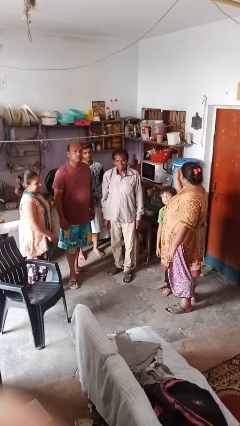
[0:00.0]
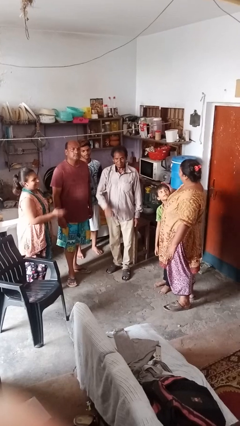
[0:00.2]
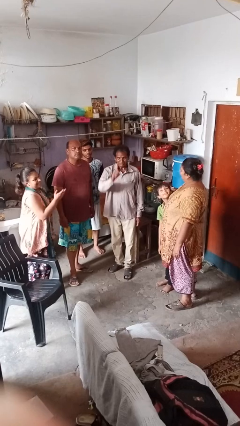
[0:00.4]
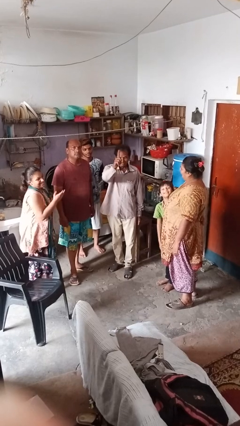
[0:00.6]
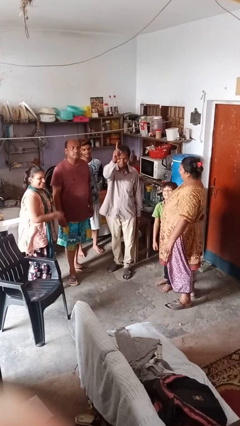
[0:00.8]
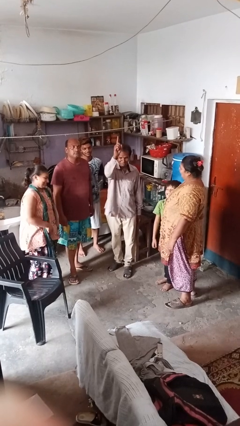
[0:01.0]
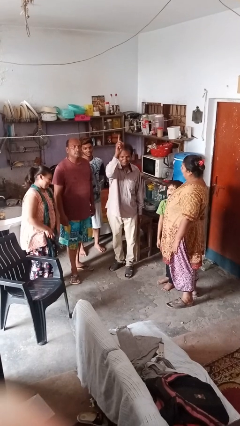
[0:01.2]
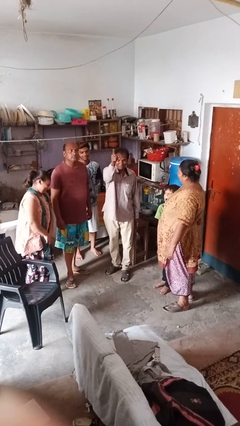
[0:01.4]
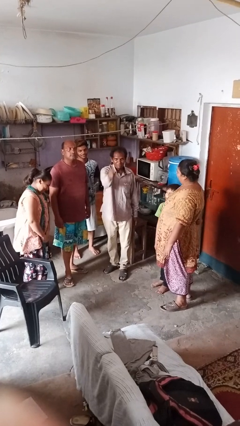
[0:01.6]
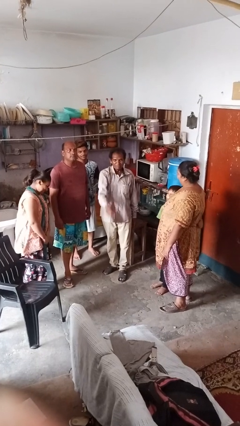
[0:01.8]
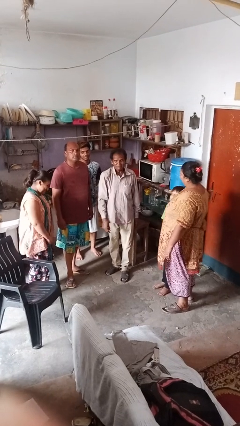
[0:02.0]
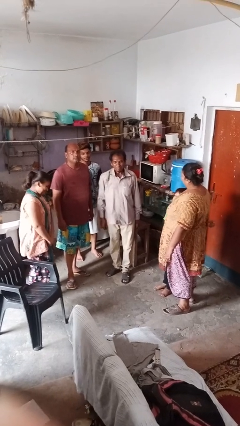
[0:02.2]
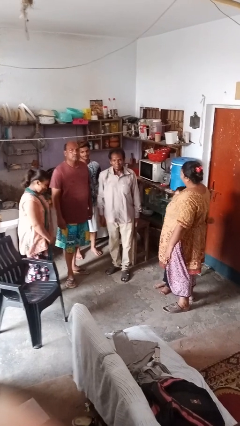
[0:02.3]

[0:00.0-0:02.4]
person points at person

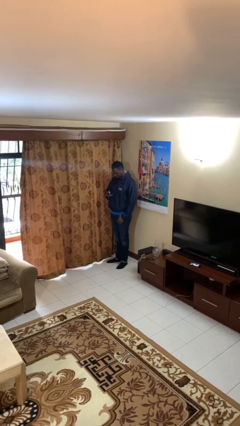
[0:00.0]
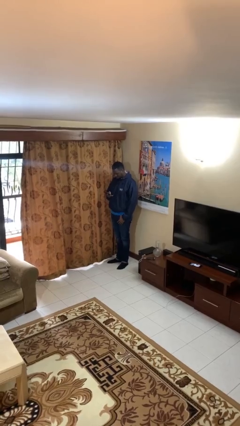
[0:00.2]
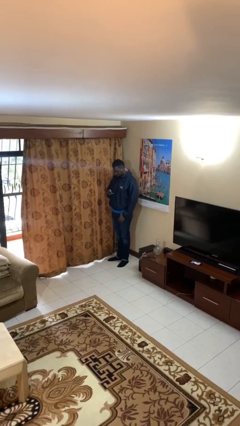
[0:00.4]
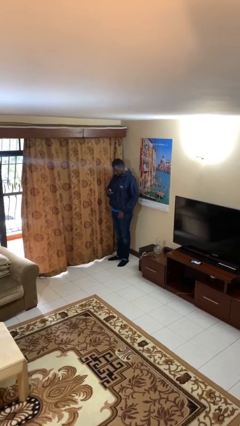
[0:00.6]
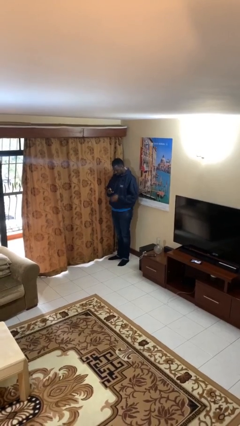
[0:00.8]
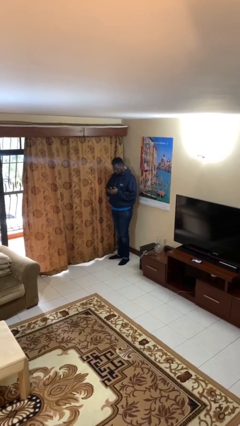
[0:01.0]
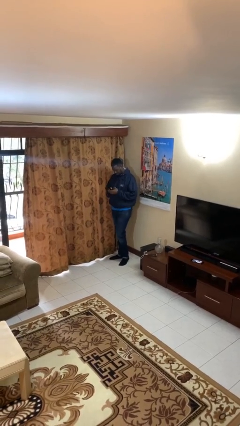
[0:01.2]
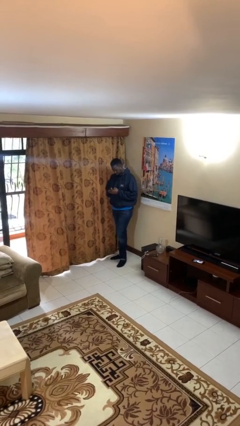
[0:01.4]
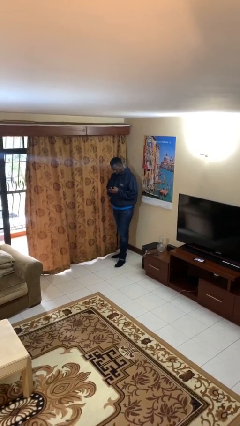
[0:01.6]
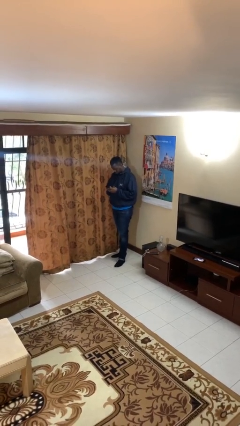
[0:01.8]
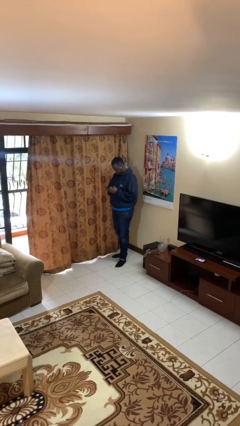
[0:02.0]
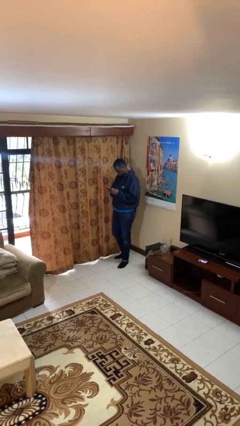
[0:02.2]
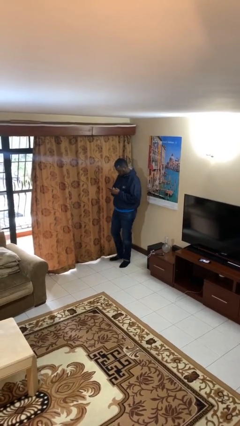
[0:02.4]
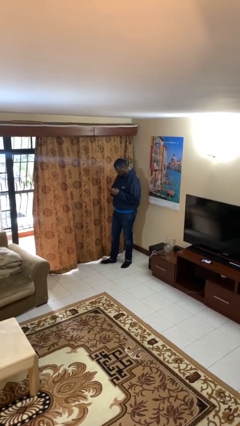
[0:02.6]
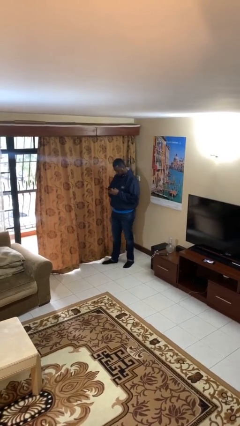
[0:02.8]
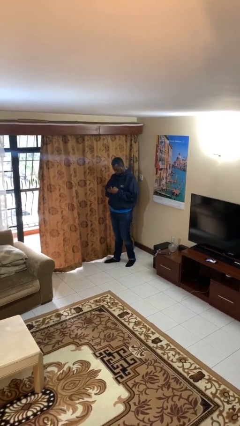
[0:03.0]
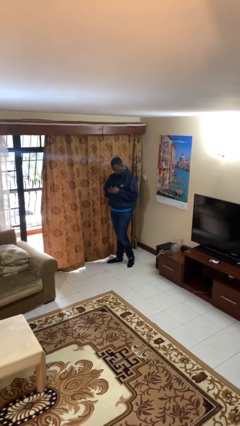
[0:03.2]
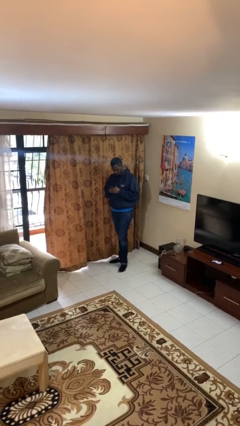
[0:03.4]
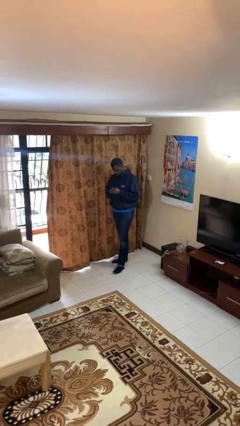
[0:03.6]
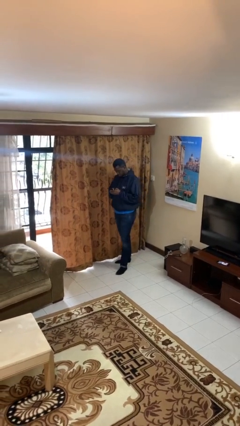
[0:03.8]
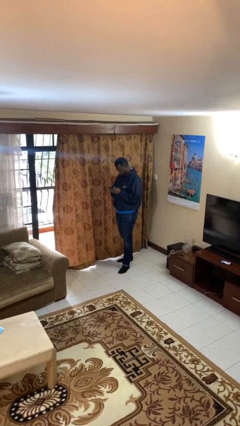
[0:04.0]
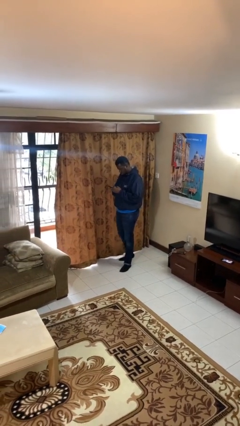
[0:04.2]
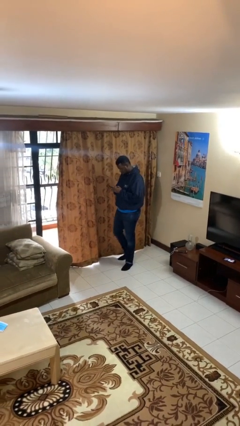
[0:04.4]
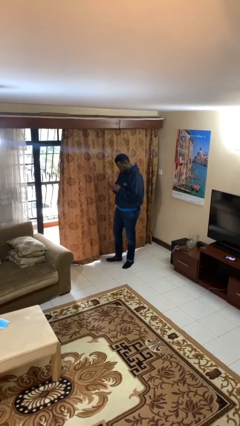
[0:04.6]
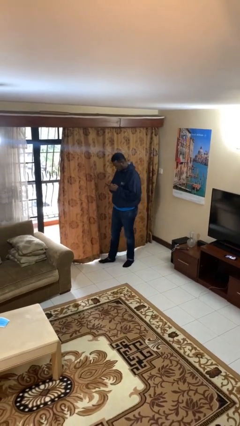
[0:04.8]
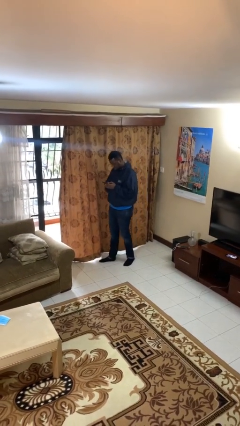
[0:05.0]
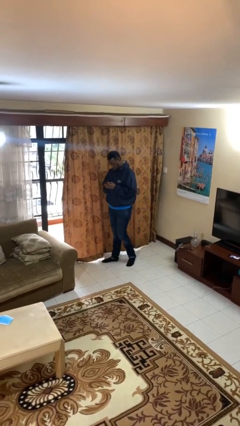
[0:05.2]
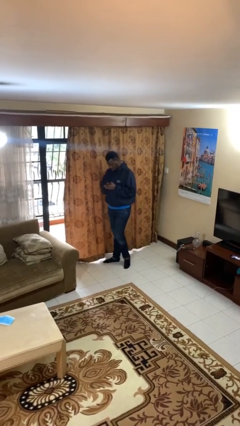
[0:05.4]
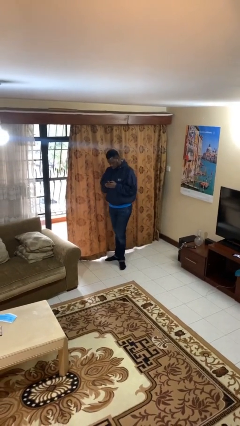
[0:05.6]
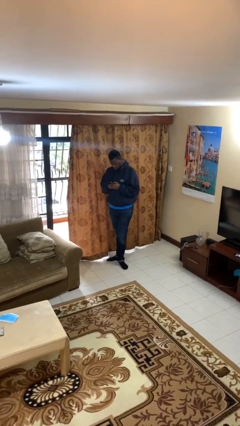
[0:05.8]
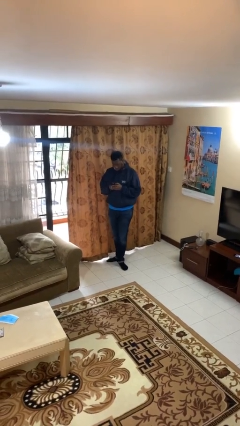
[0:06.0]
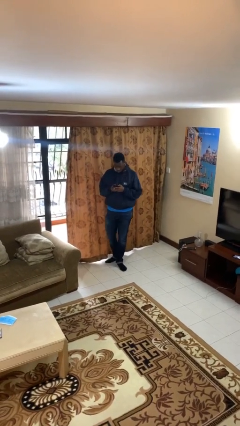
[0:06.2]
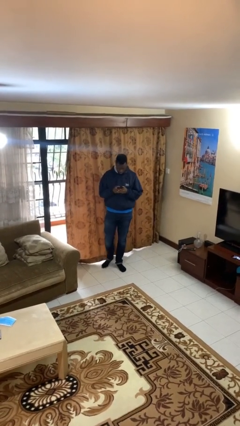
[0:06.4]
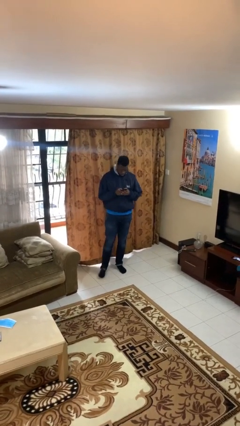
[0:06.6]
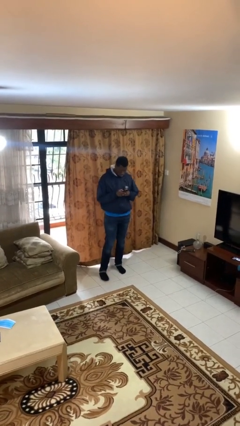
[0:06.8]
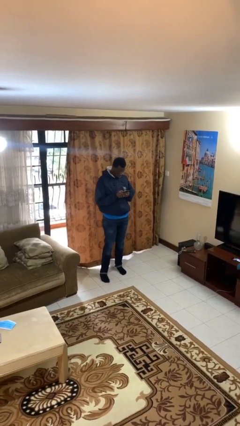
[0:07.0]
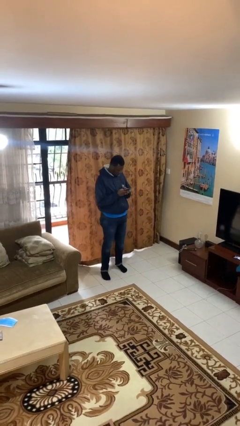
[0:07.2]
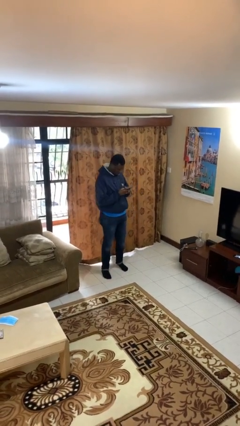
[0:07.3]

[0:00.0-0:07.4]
person texts on phone

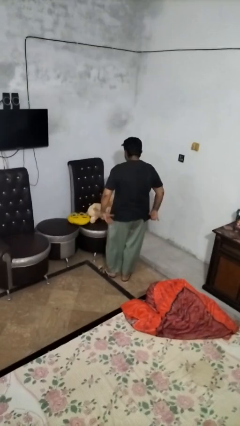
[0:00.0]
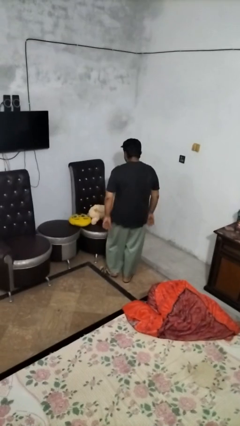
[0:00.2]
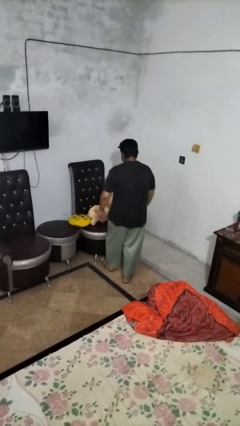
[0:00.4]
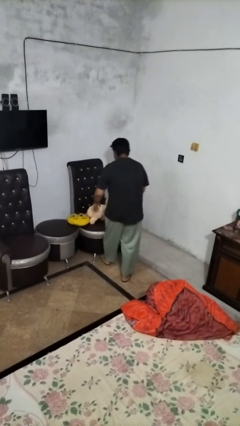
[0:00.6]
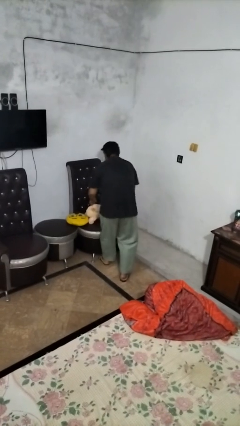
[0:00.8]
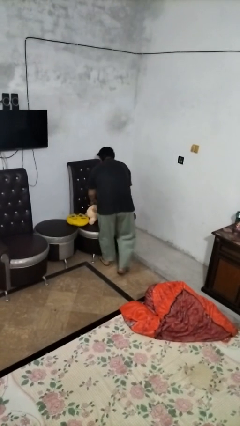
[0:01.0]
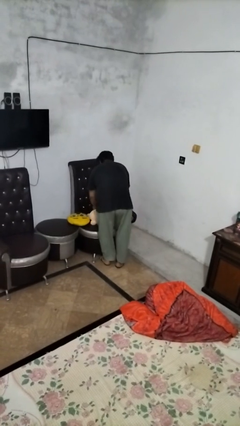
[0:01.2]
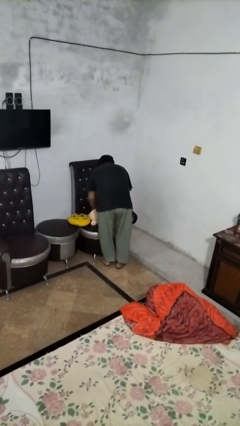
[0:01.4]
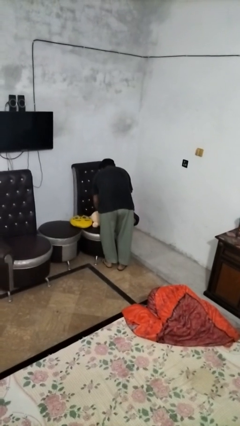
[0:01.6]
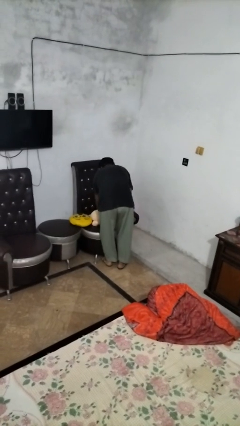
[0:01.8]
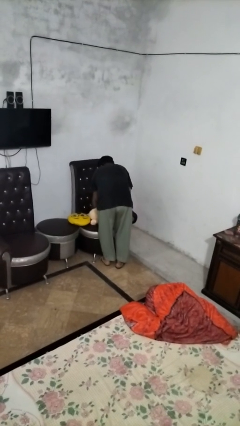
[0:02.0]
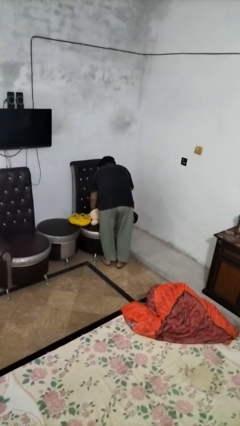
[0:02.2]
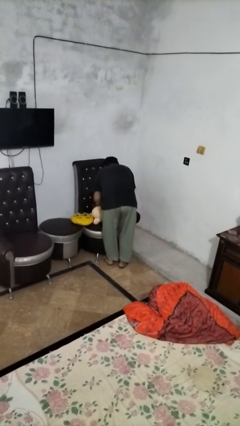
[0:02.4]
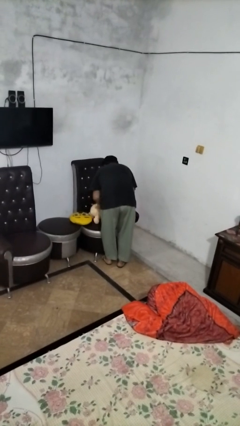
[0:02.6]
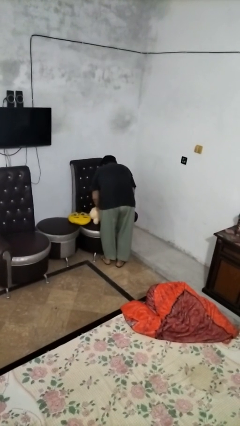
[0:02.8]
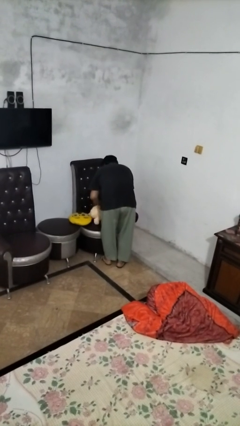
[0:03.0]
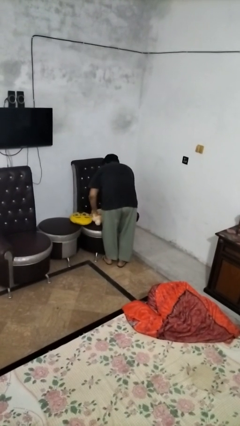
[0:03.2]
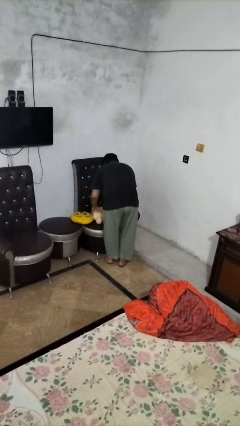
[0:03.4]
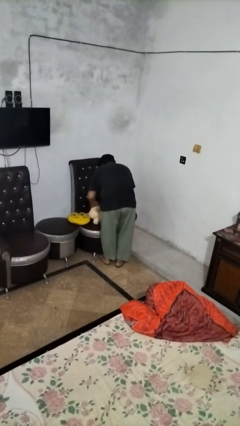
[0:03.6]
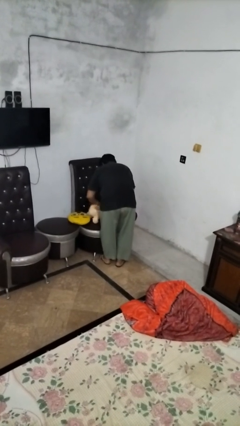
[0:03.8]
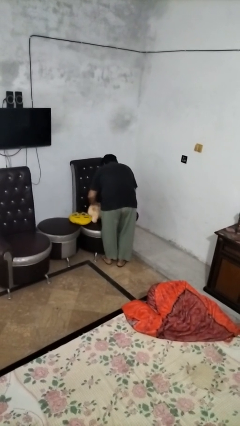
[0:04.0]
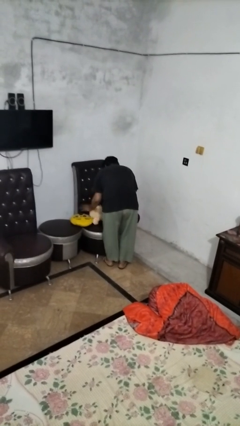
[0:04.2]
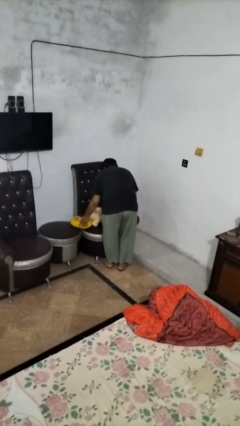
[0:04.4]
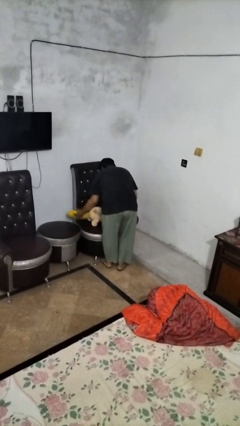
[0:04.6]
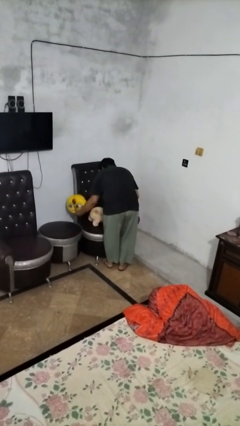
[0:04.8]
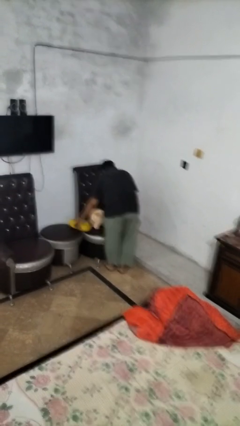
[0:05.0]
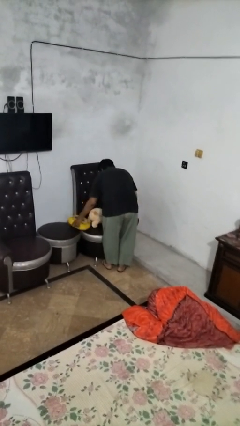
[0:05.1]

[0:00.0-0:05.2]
person searches in couch

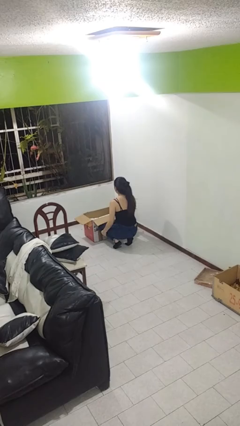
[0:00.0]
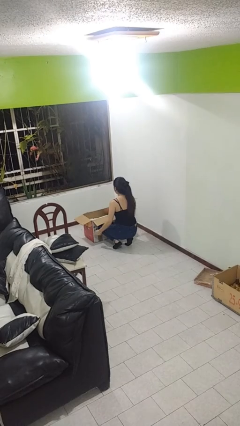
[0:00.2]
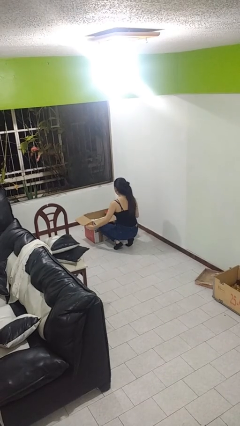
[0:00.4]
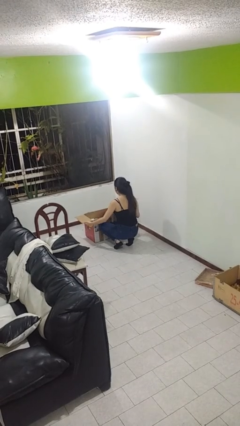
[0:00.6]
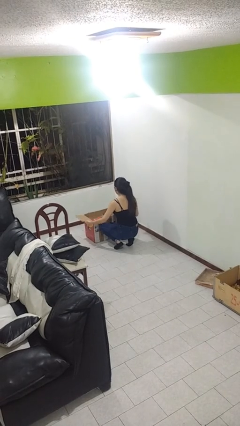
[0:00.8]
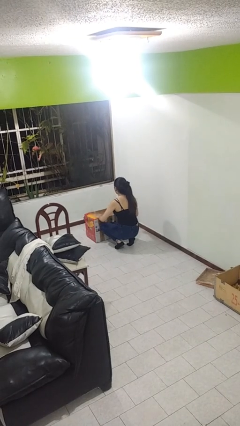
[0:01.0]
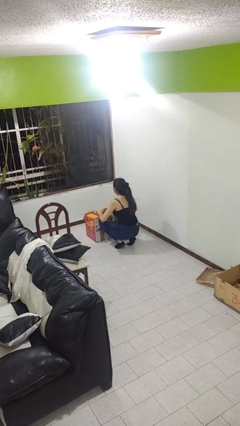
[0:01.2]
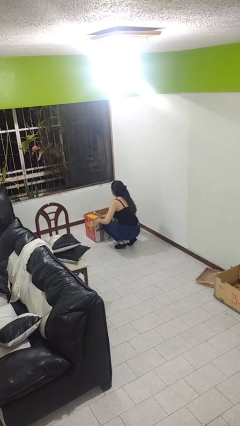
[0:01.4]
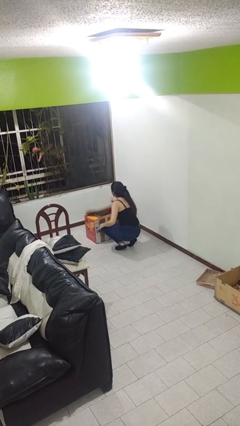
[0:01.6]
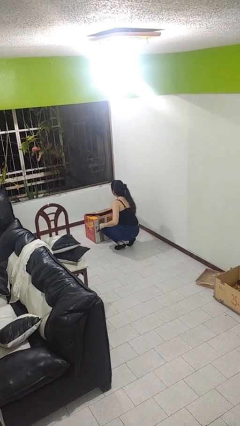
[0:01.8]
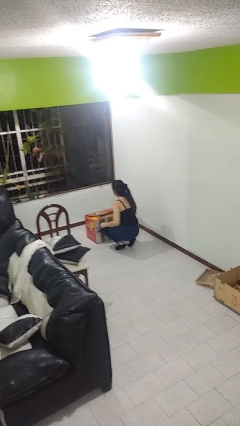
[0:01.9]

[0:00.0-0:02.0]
person closes box

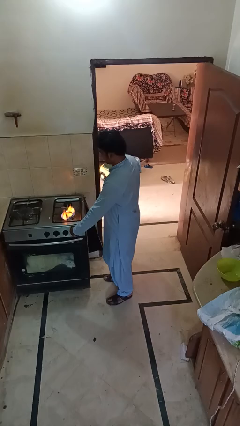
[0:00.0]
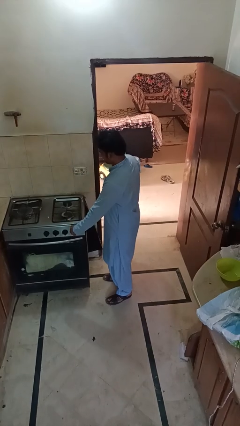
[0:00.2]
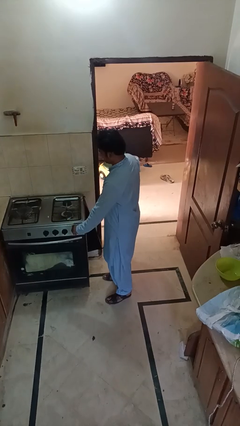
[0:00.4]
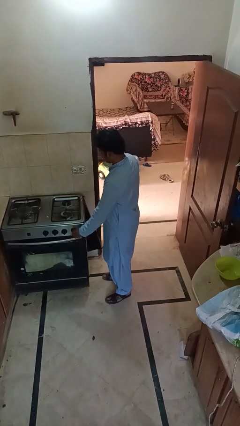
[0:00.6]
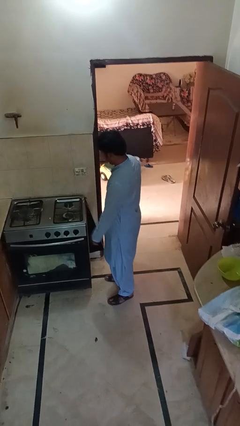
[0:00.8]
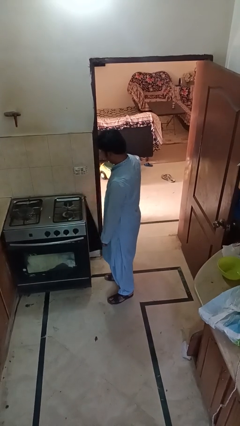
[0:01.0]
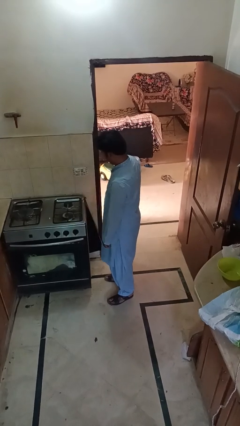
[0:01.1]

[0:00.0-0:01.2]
person turns off stovetop
